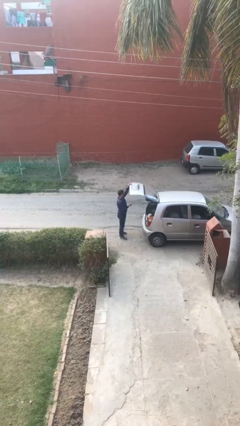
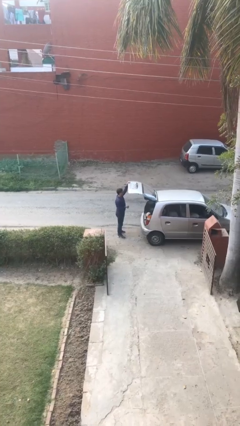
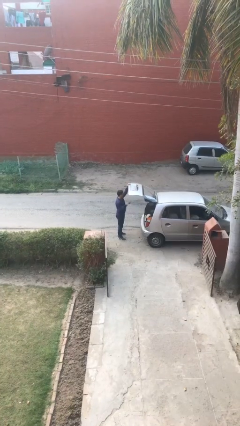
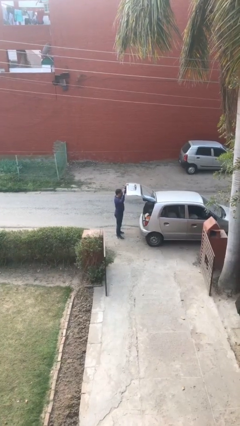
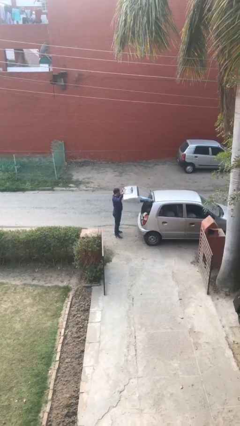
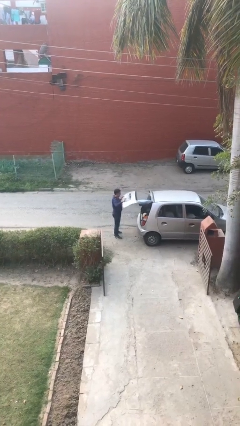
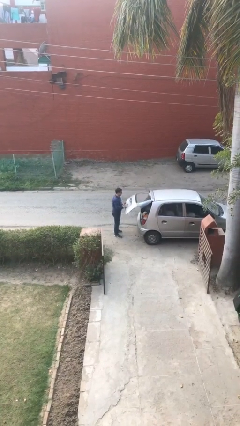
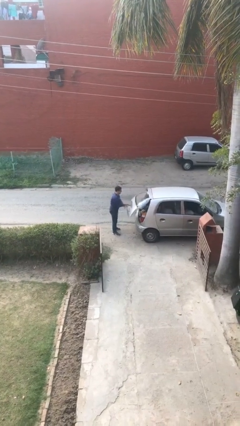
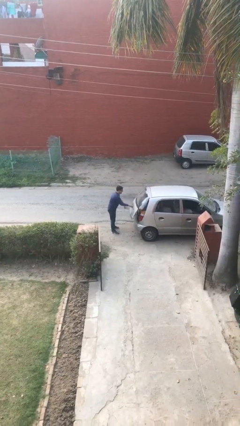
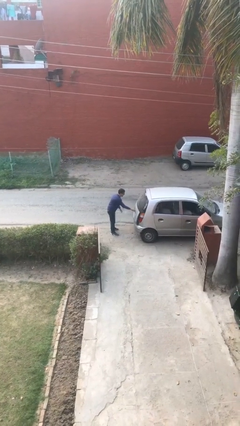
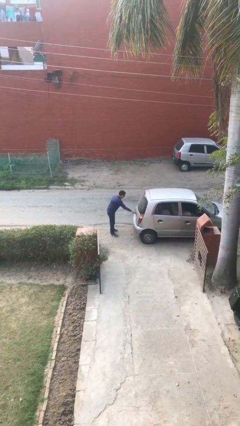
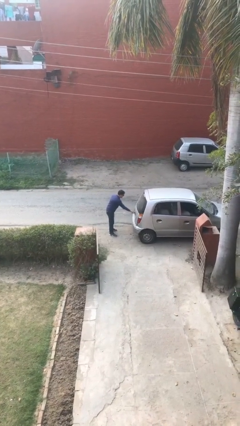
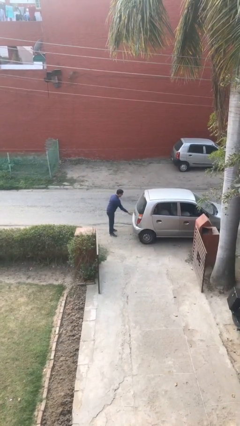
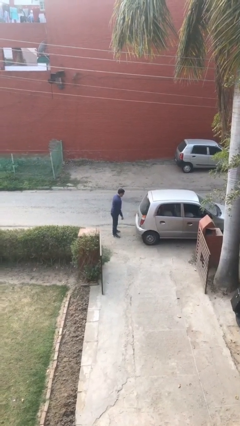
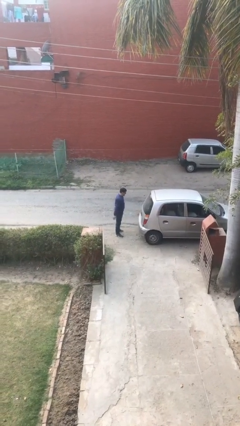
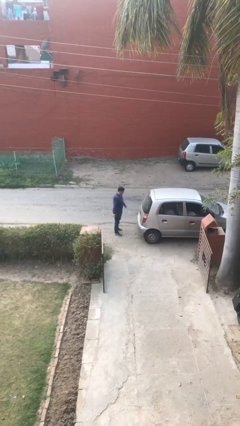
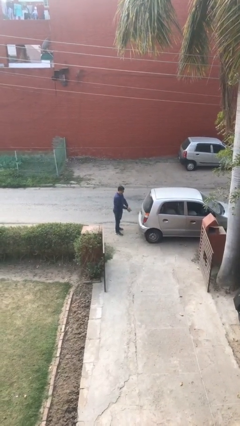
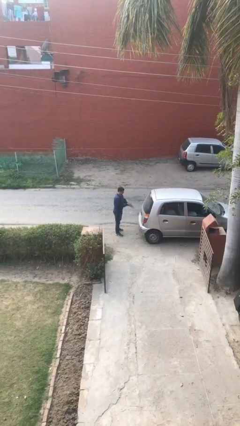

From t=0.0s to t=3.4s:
person closes car trunk

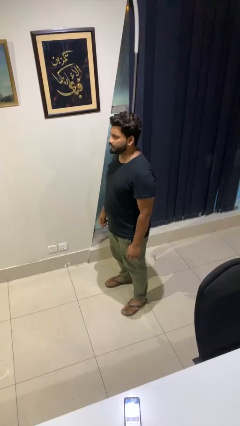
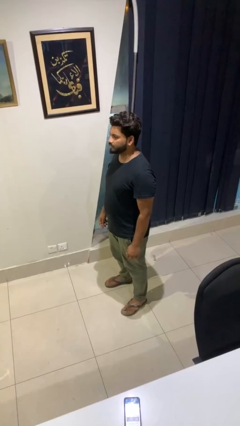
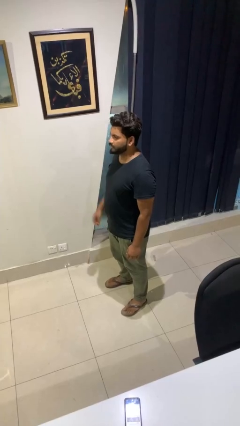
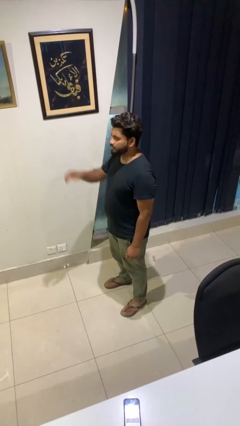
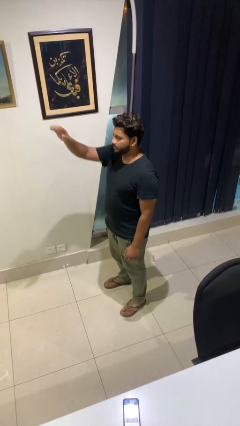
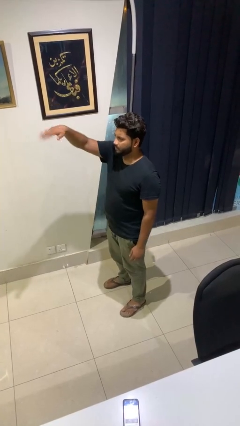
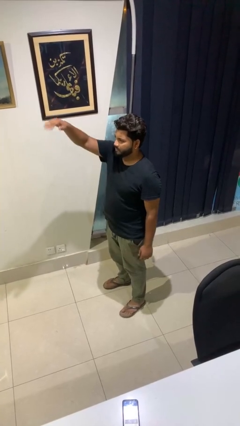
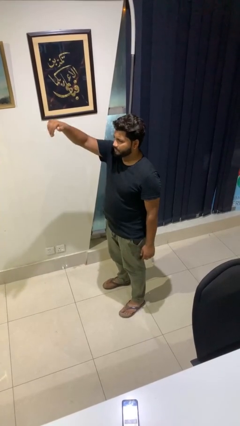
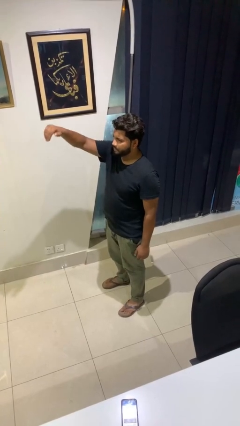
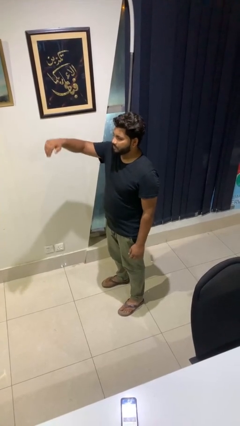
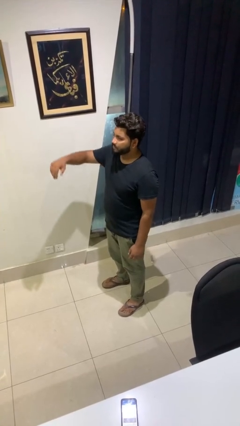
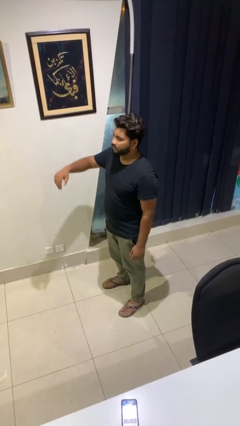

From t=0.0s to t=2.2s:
person gestures come here

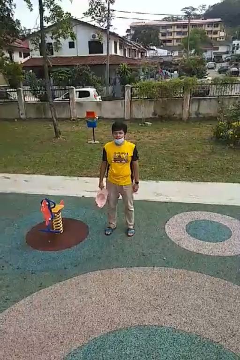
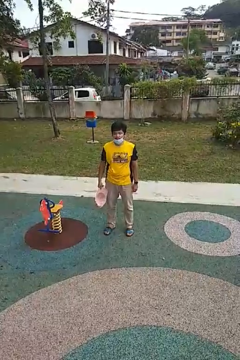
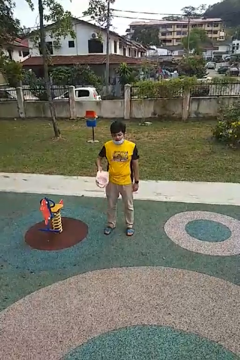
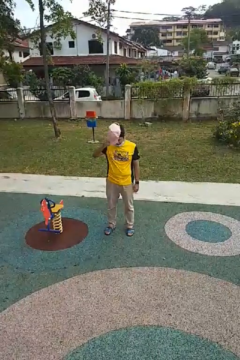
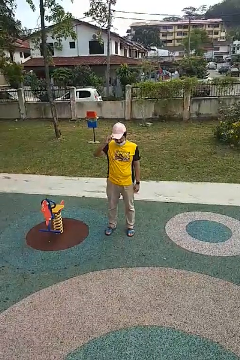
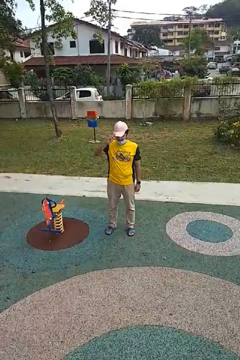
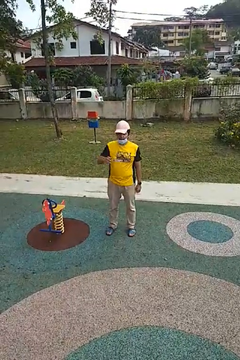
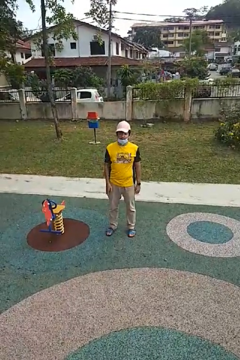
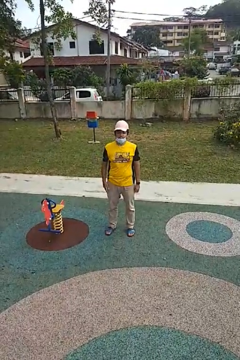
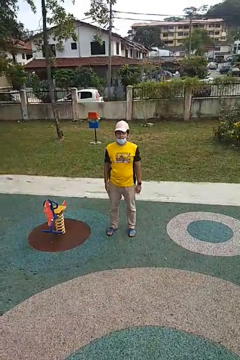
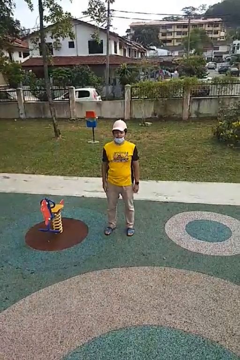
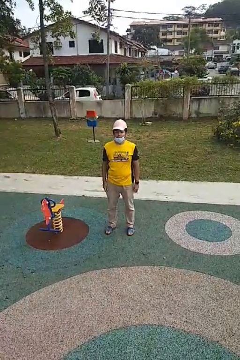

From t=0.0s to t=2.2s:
person puts on hat

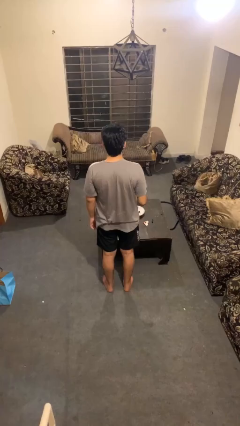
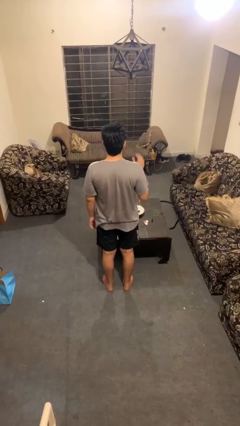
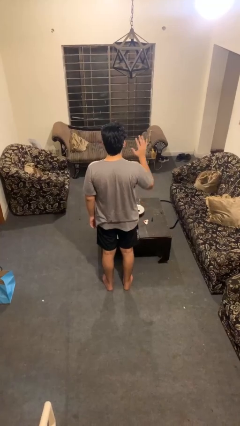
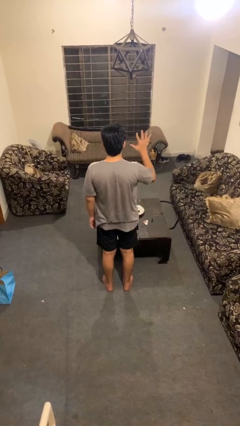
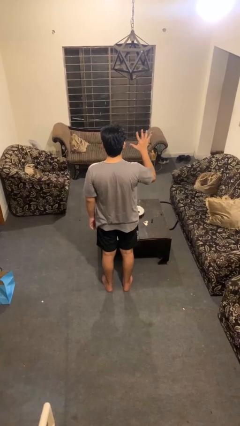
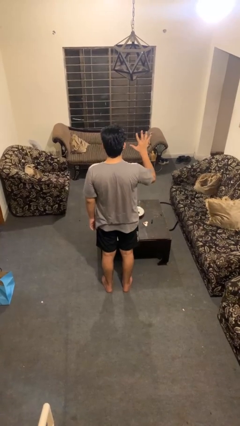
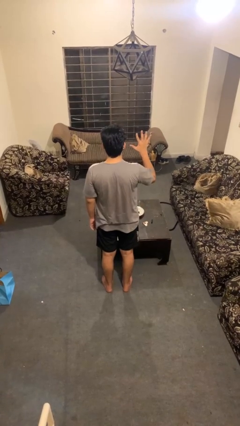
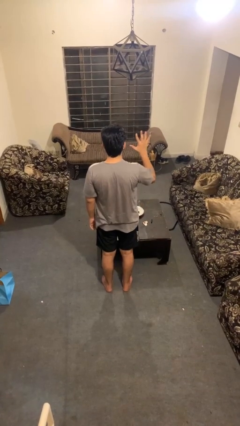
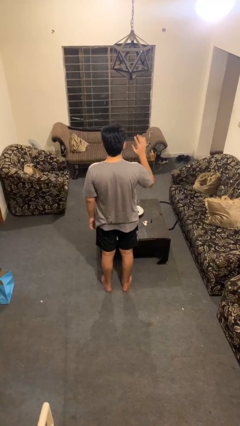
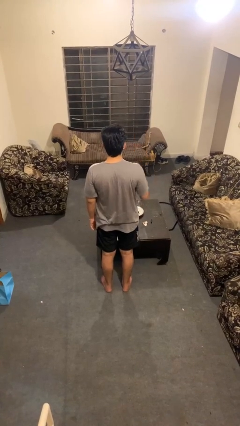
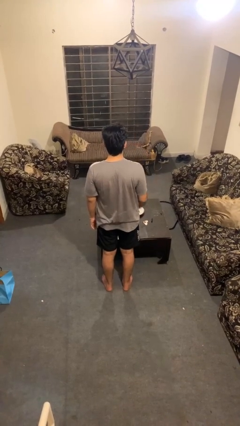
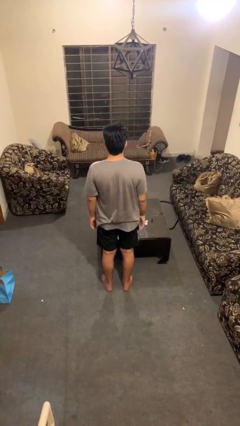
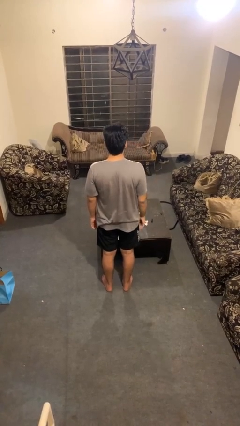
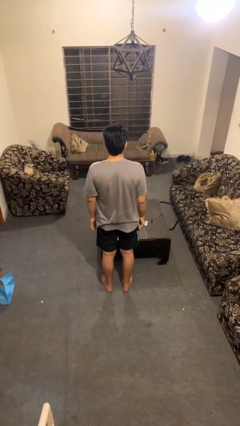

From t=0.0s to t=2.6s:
person gestures number five

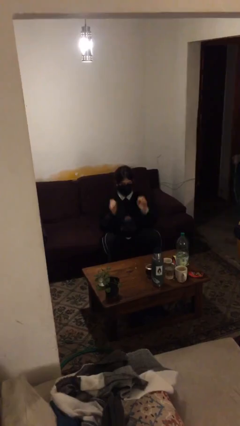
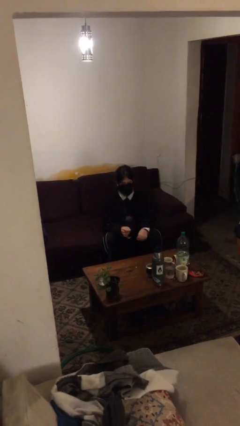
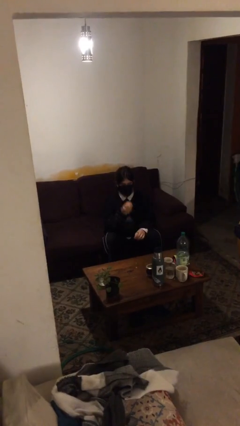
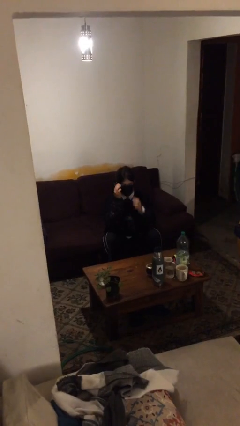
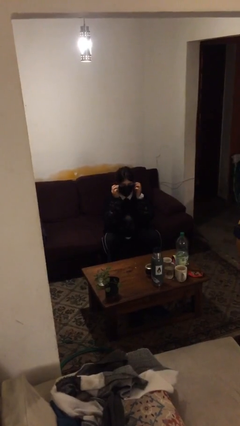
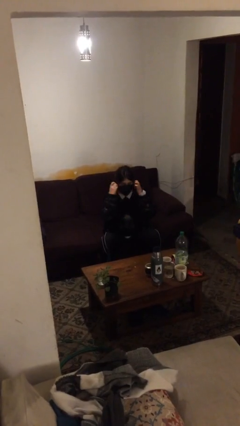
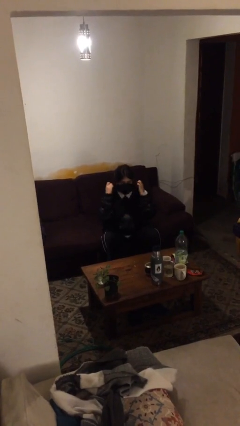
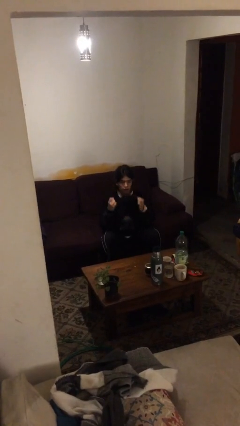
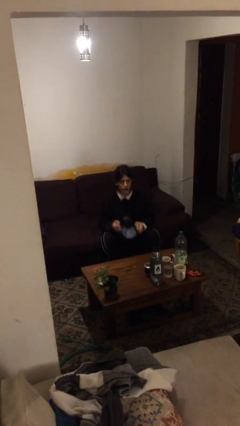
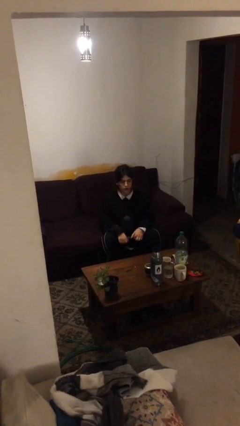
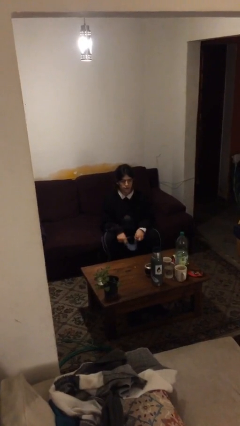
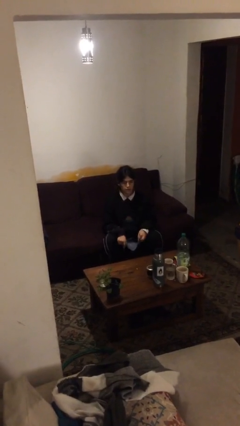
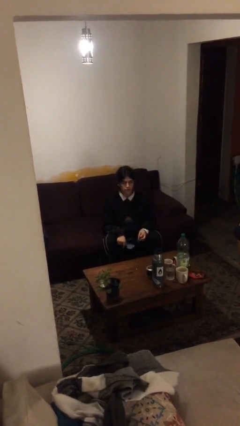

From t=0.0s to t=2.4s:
person takes off facemask

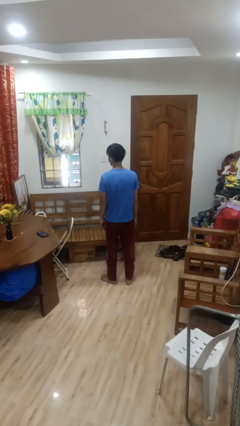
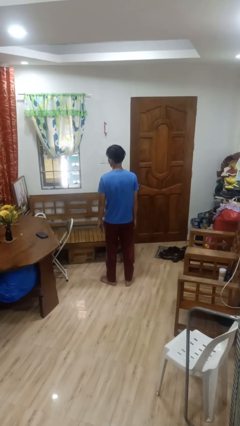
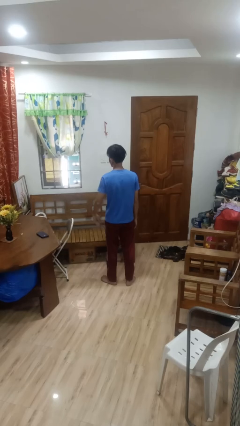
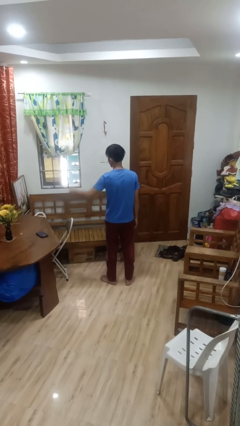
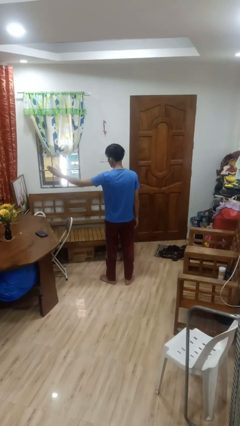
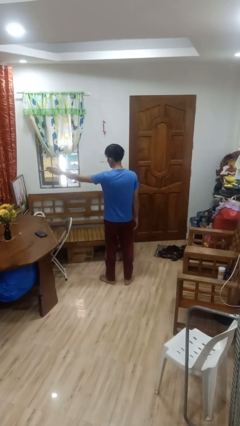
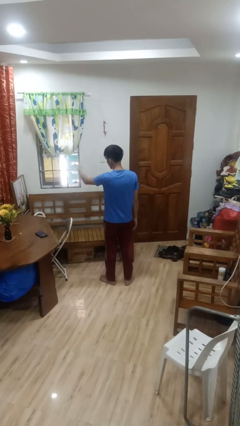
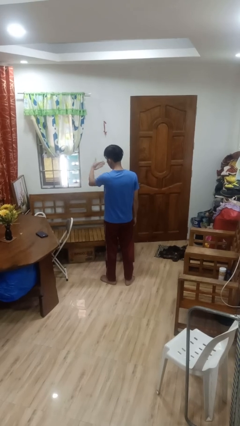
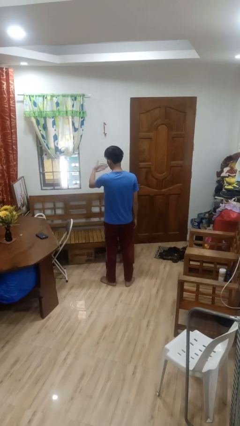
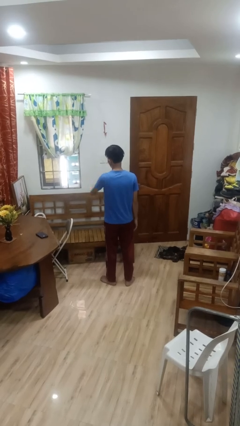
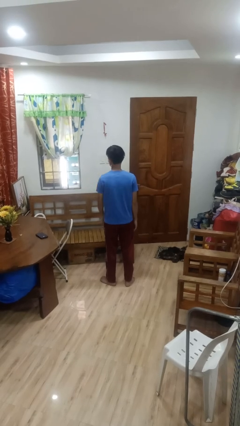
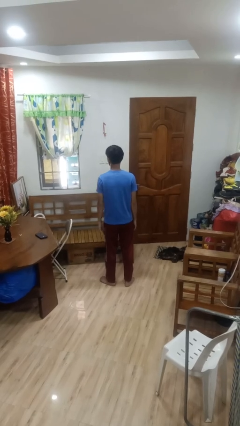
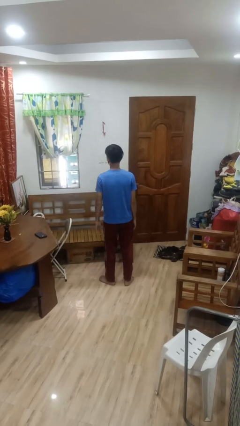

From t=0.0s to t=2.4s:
person gestures swipe right

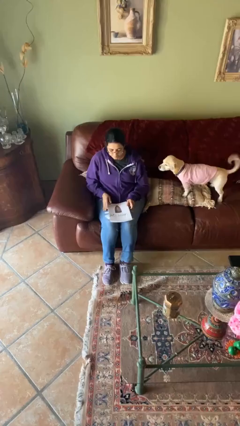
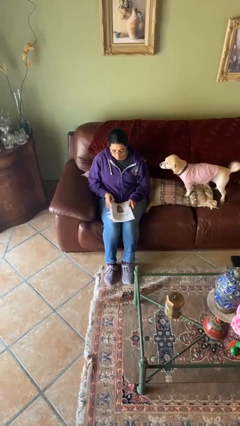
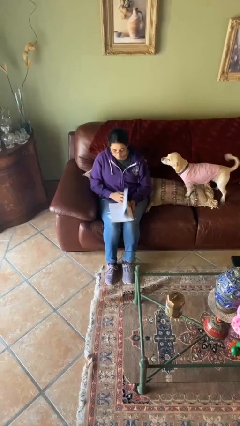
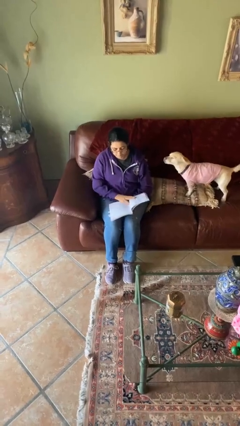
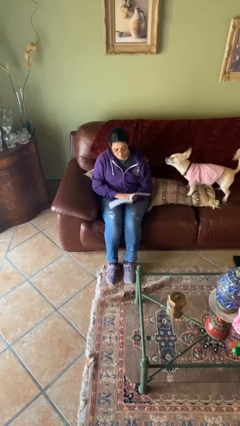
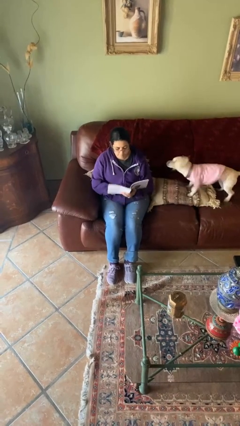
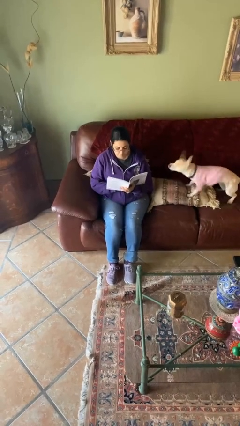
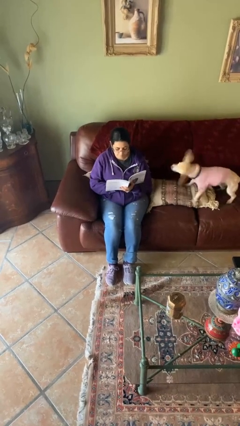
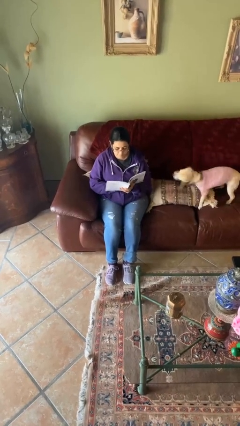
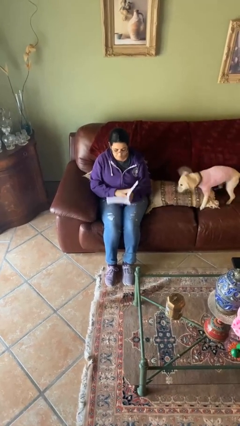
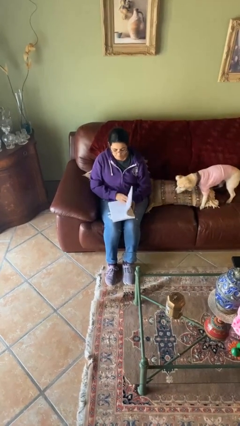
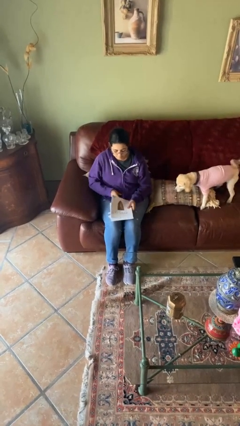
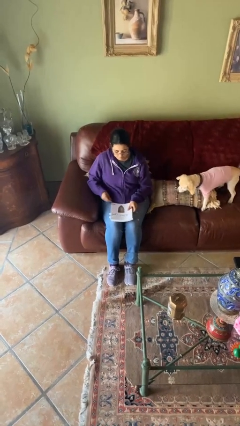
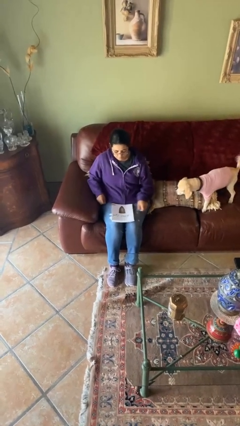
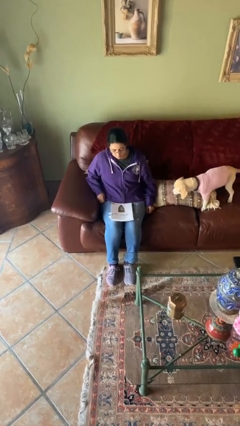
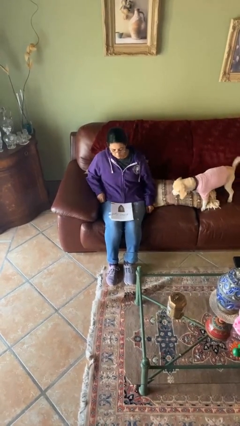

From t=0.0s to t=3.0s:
person reads document
